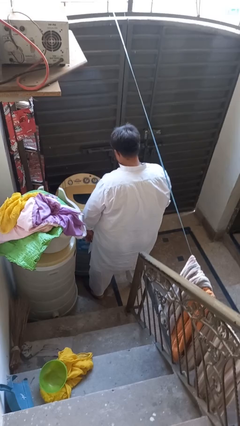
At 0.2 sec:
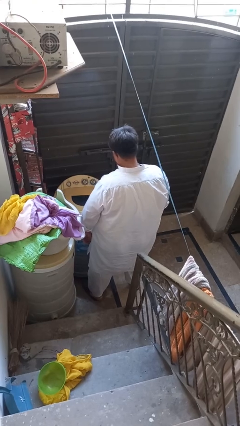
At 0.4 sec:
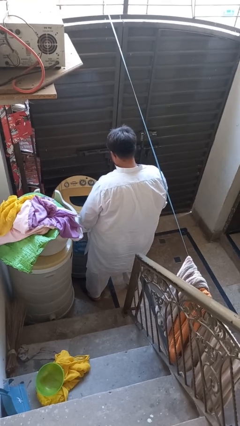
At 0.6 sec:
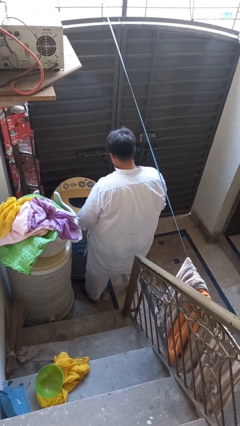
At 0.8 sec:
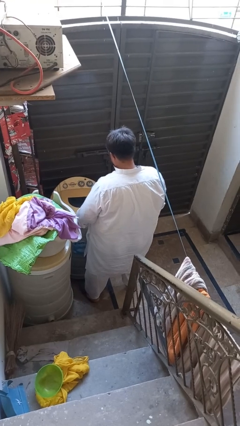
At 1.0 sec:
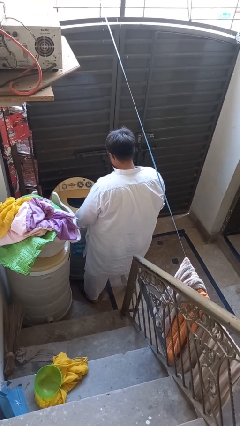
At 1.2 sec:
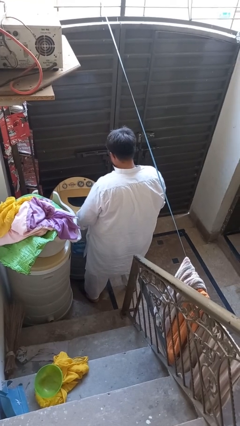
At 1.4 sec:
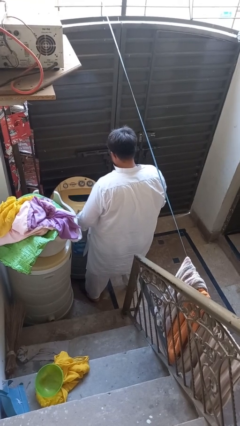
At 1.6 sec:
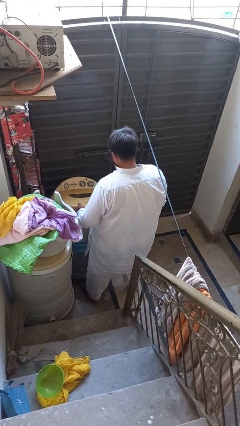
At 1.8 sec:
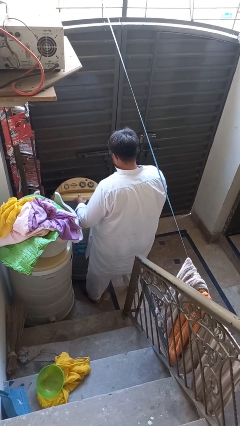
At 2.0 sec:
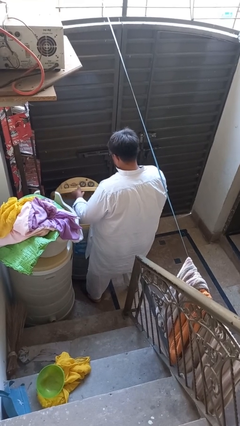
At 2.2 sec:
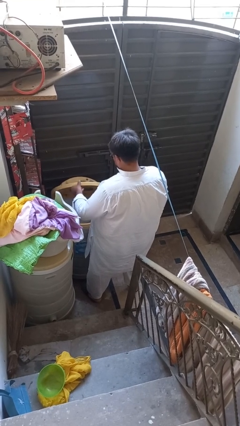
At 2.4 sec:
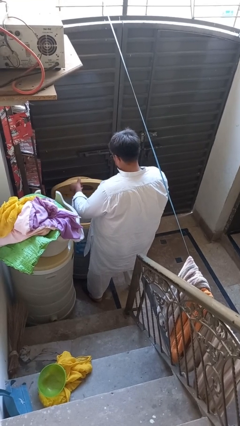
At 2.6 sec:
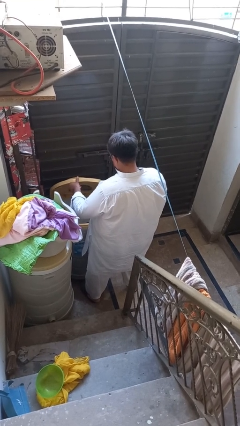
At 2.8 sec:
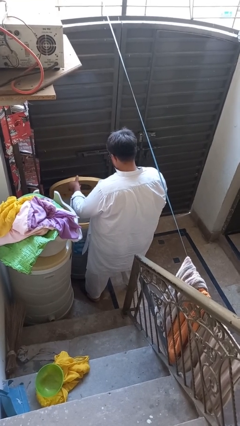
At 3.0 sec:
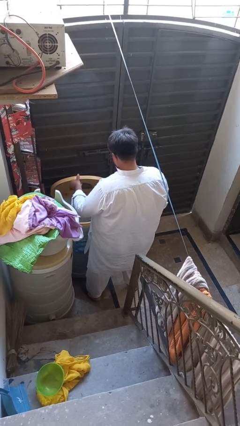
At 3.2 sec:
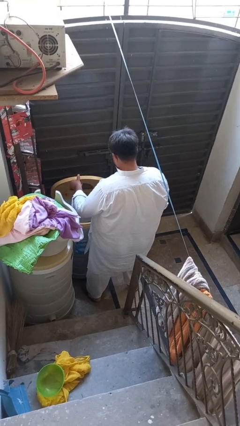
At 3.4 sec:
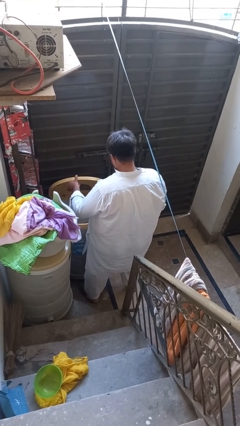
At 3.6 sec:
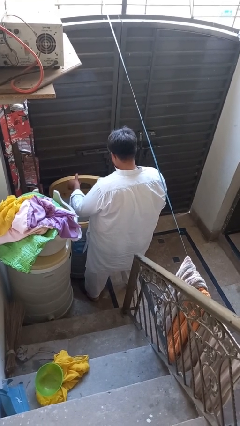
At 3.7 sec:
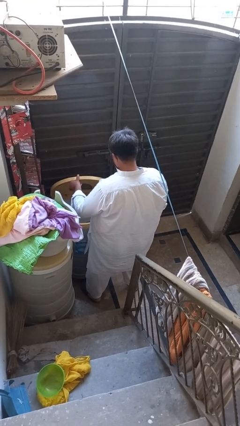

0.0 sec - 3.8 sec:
person opens clothes washer

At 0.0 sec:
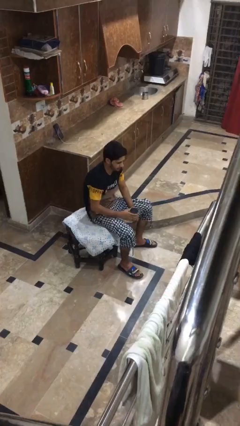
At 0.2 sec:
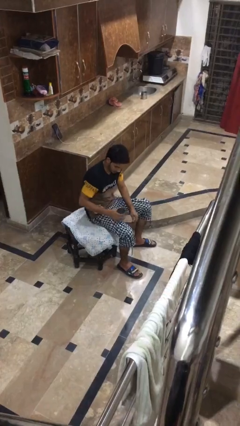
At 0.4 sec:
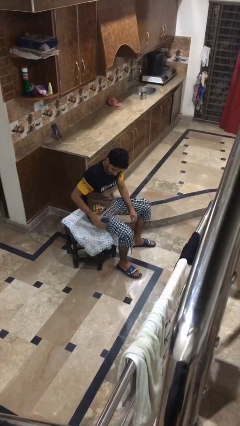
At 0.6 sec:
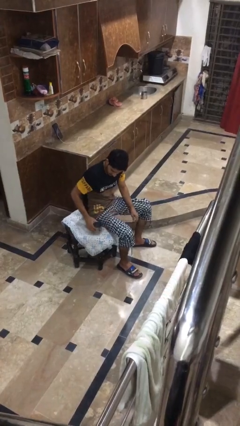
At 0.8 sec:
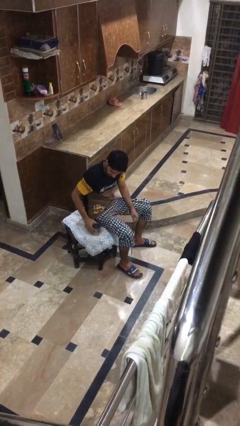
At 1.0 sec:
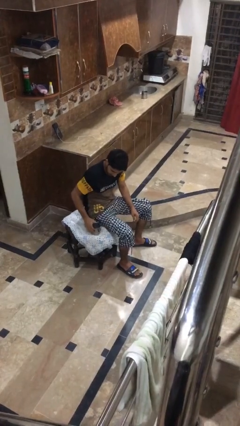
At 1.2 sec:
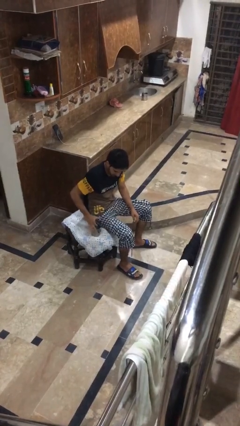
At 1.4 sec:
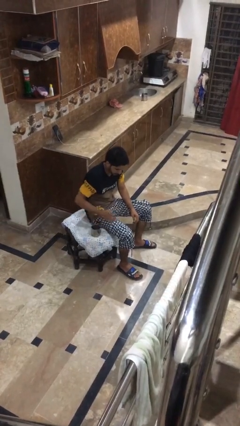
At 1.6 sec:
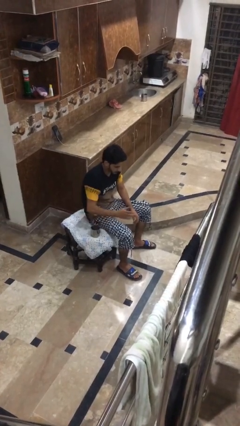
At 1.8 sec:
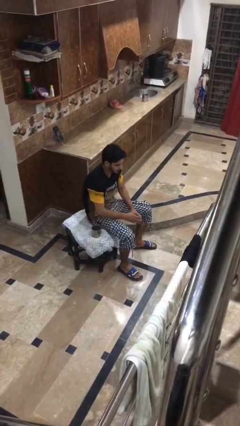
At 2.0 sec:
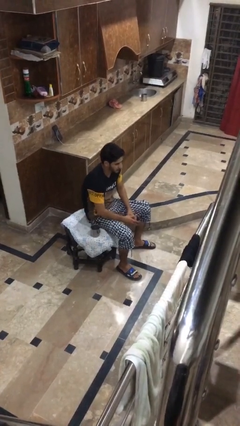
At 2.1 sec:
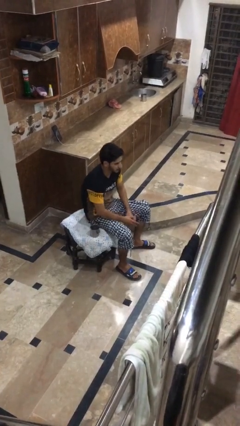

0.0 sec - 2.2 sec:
person puts down object on table

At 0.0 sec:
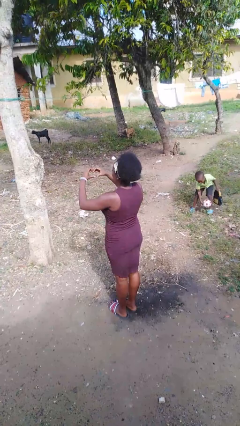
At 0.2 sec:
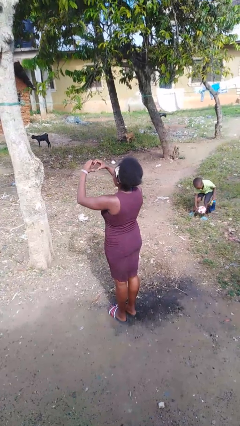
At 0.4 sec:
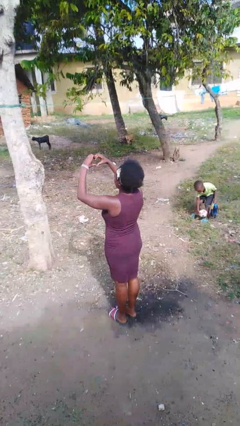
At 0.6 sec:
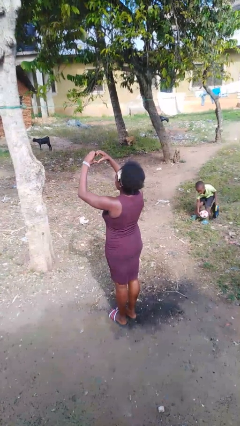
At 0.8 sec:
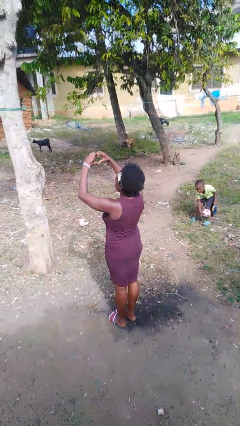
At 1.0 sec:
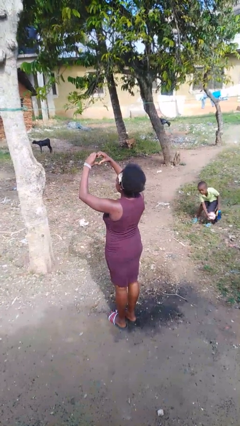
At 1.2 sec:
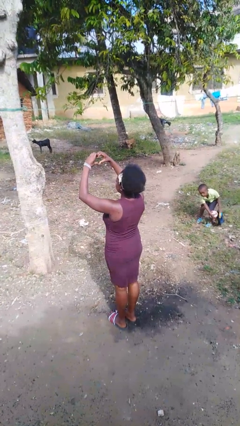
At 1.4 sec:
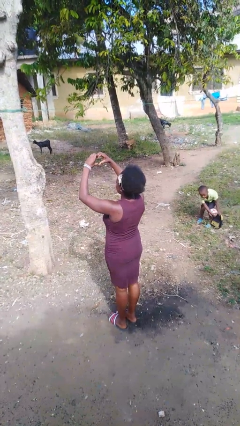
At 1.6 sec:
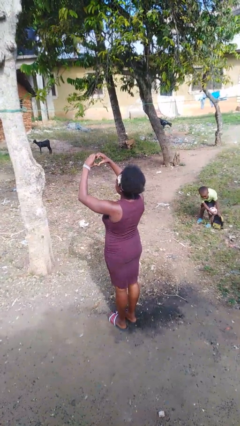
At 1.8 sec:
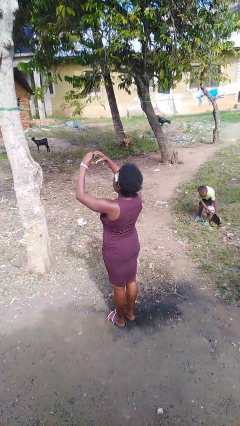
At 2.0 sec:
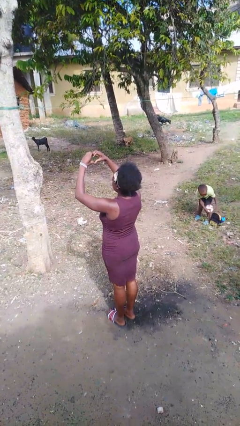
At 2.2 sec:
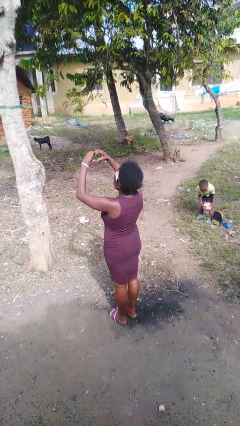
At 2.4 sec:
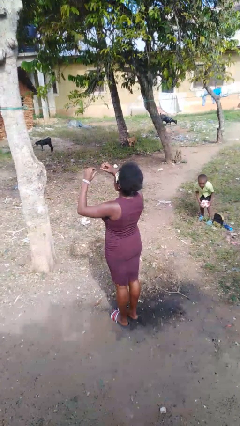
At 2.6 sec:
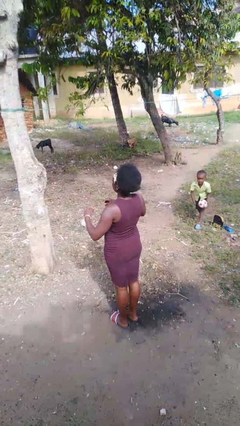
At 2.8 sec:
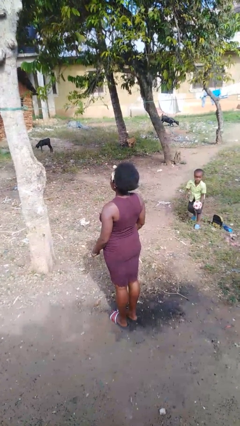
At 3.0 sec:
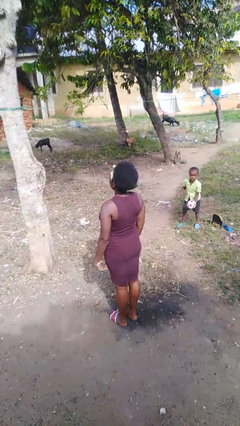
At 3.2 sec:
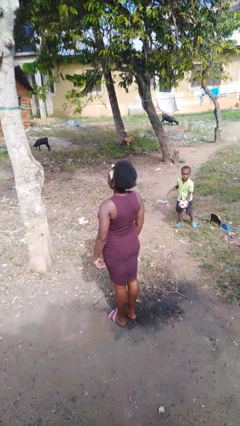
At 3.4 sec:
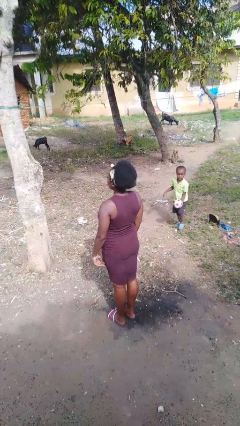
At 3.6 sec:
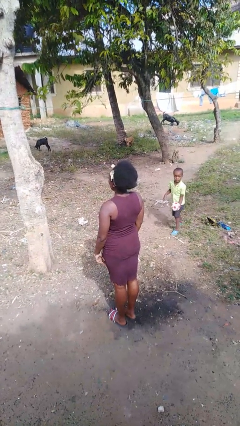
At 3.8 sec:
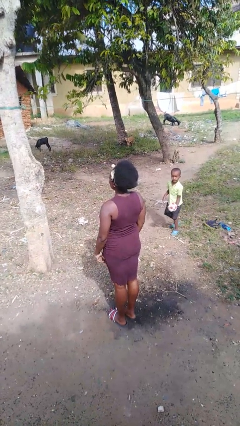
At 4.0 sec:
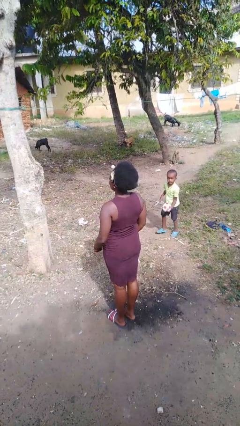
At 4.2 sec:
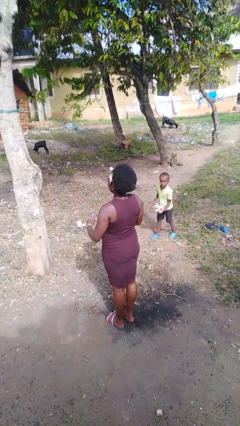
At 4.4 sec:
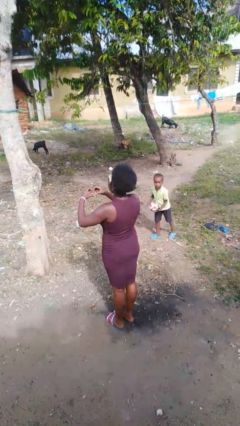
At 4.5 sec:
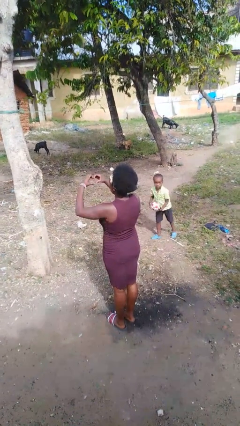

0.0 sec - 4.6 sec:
person gestures heart

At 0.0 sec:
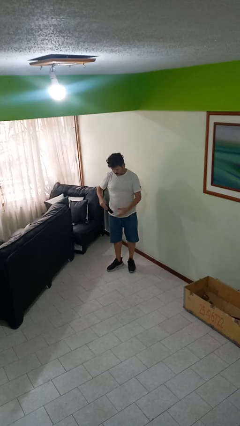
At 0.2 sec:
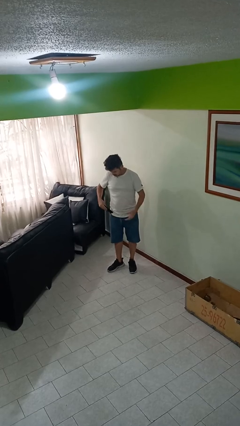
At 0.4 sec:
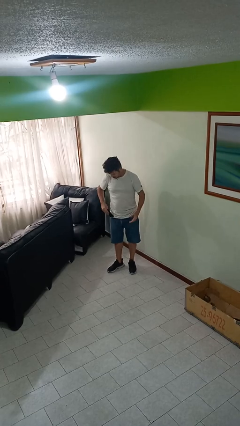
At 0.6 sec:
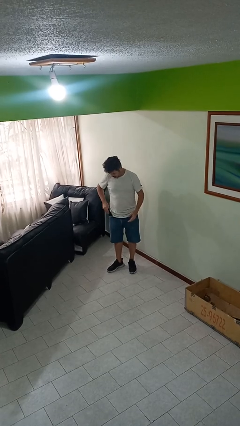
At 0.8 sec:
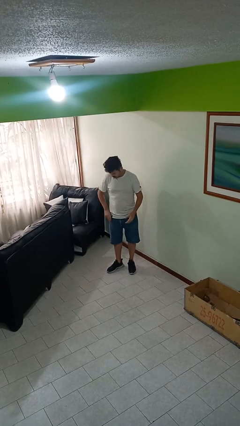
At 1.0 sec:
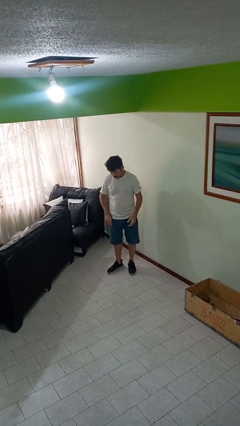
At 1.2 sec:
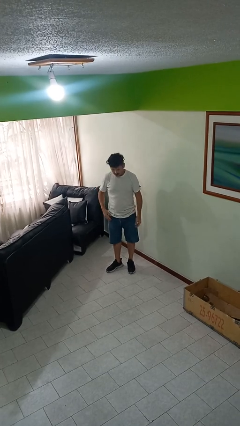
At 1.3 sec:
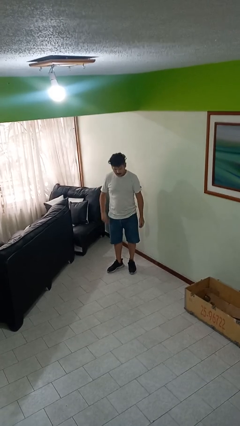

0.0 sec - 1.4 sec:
person puts phone into pocket

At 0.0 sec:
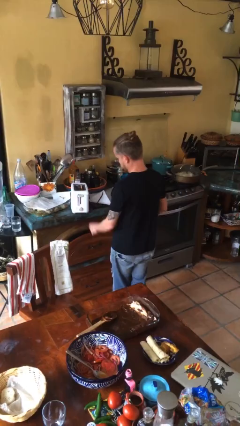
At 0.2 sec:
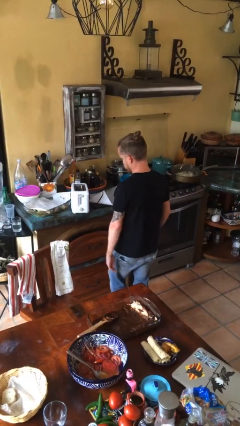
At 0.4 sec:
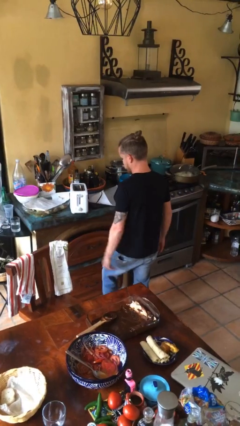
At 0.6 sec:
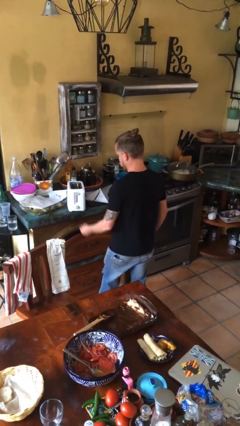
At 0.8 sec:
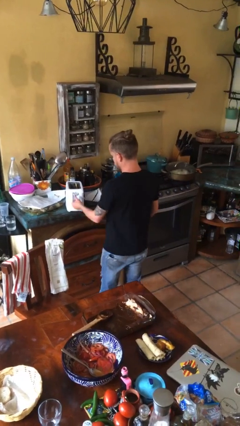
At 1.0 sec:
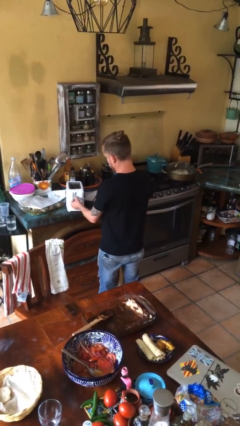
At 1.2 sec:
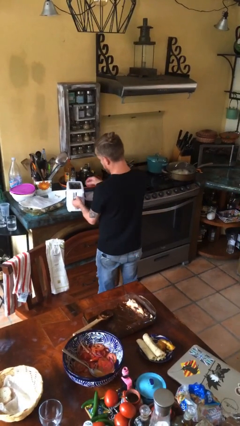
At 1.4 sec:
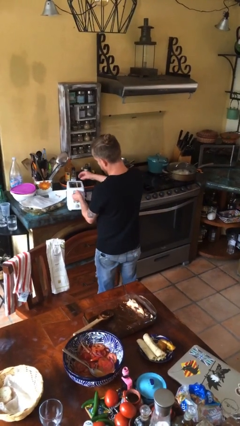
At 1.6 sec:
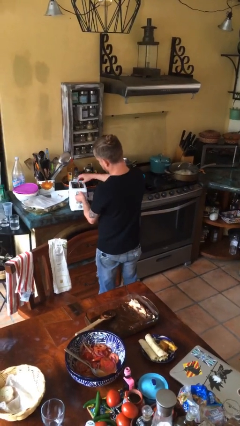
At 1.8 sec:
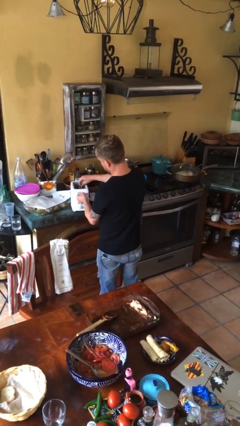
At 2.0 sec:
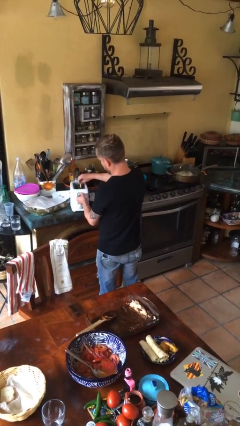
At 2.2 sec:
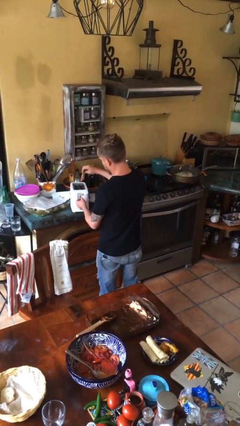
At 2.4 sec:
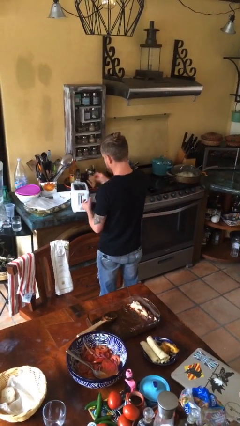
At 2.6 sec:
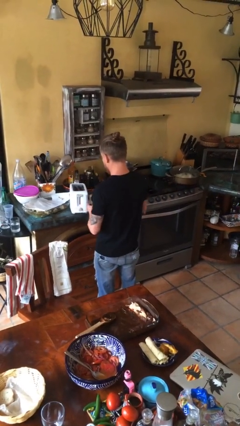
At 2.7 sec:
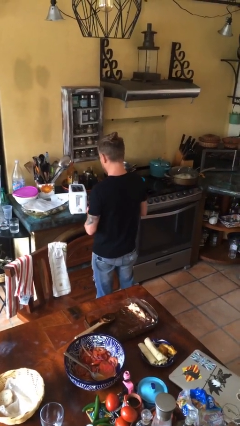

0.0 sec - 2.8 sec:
person takes object from toaster

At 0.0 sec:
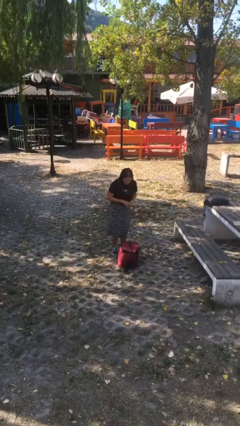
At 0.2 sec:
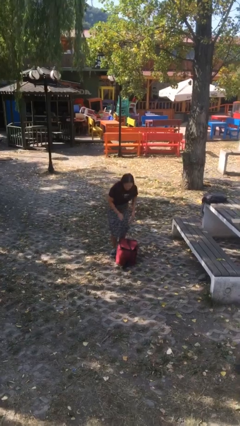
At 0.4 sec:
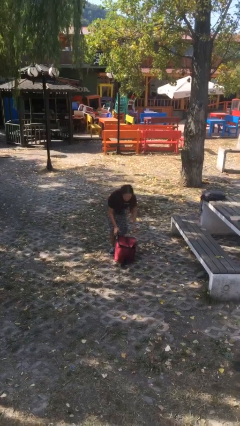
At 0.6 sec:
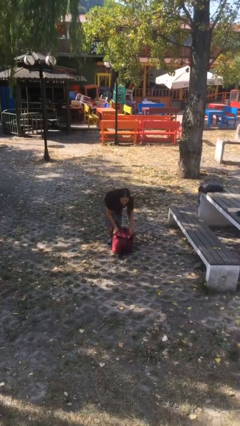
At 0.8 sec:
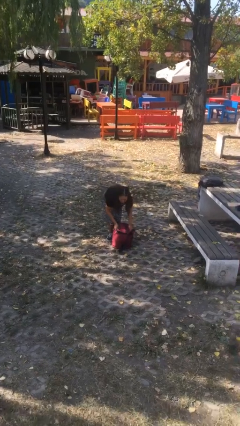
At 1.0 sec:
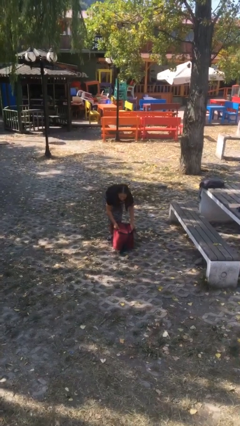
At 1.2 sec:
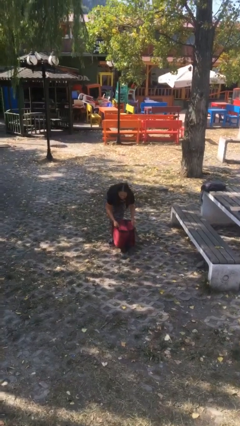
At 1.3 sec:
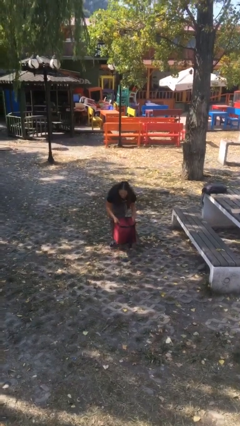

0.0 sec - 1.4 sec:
person picks up object from floor

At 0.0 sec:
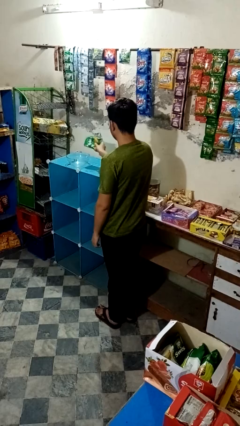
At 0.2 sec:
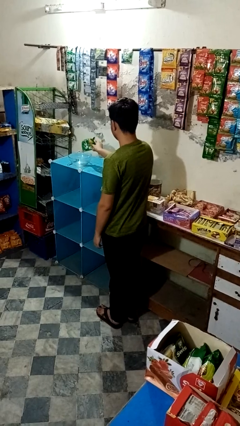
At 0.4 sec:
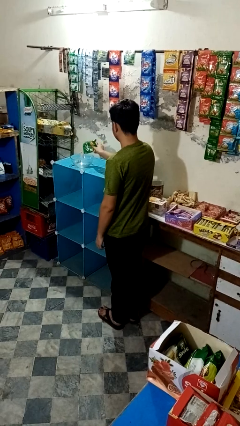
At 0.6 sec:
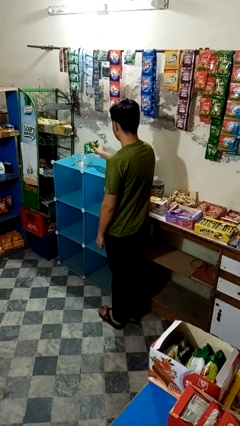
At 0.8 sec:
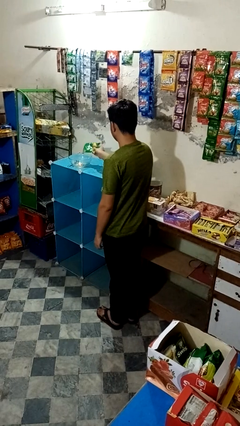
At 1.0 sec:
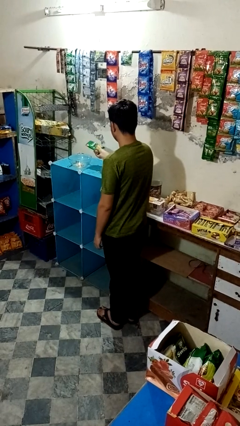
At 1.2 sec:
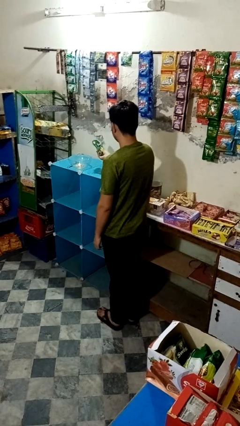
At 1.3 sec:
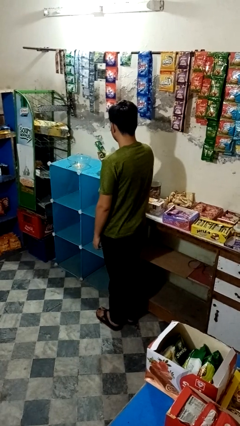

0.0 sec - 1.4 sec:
person pours into bowl
